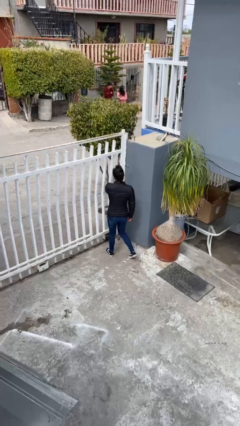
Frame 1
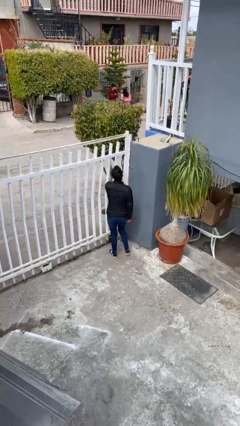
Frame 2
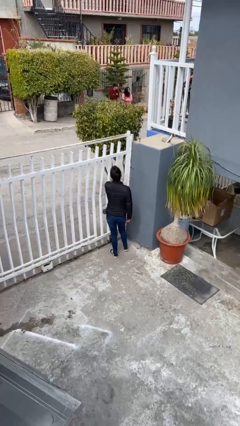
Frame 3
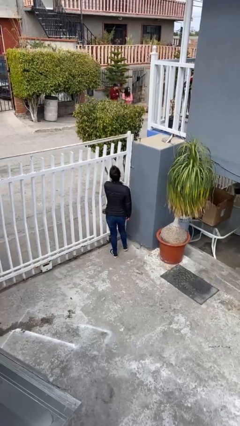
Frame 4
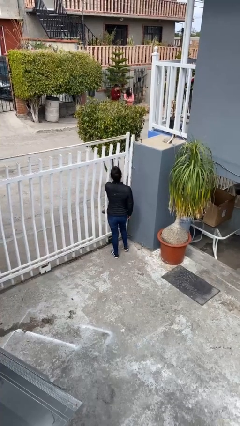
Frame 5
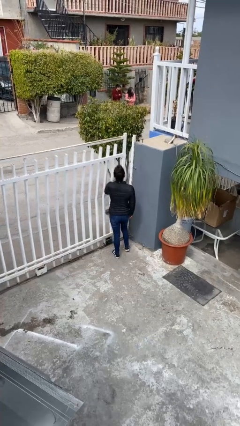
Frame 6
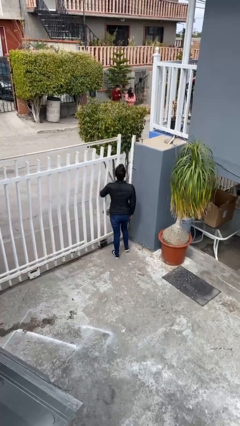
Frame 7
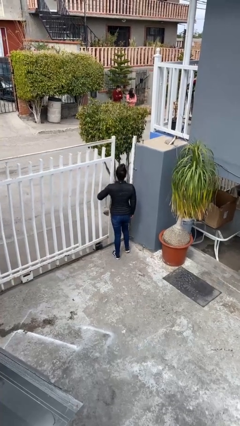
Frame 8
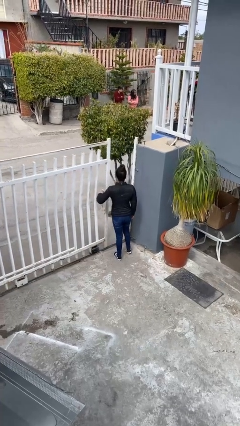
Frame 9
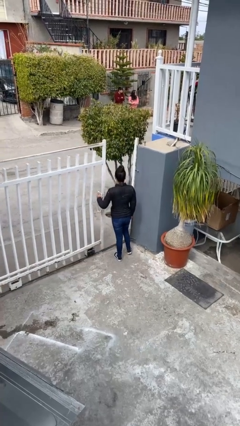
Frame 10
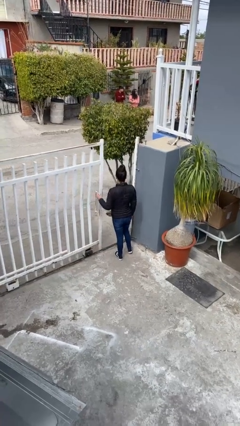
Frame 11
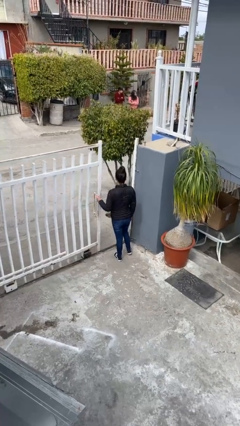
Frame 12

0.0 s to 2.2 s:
person opens facility door

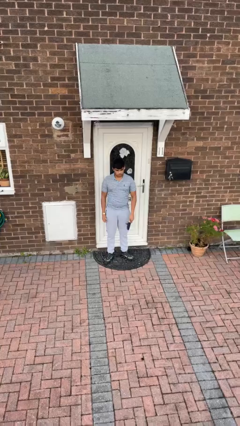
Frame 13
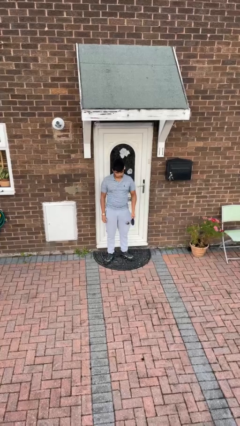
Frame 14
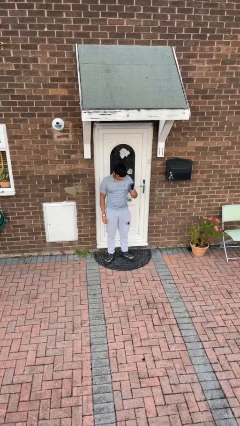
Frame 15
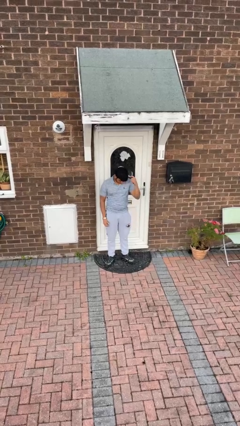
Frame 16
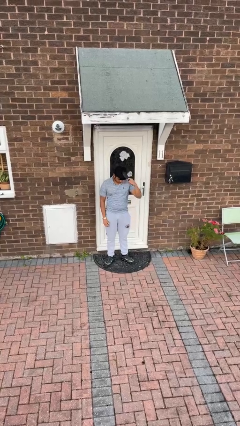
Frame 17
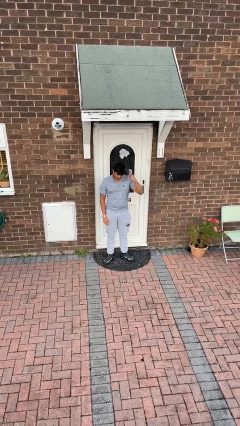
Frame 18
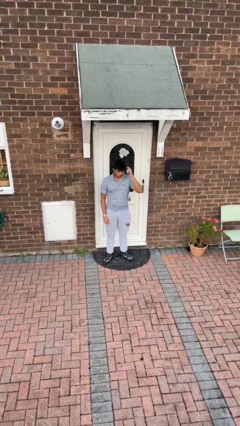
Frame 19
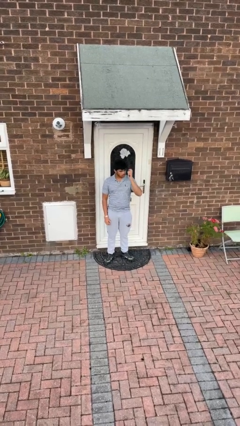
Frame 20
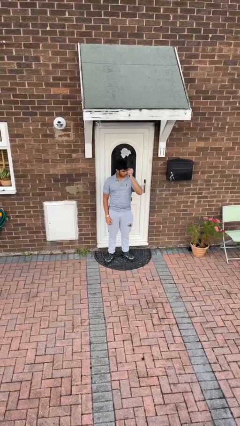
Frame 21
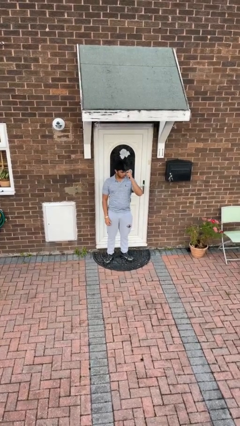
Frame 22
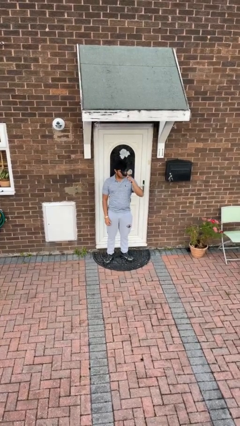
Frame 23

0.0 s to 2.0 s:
person brushes hair

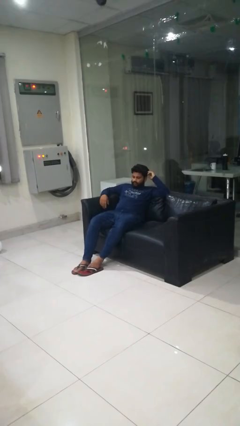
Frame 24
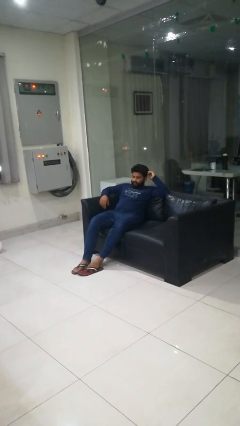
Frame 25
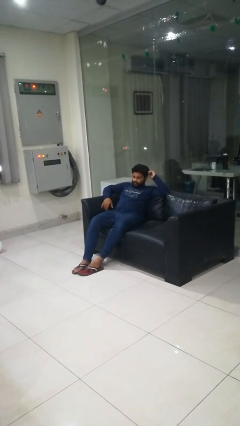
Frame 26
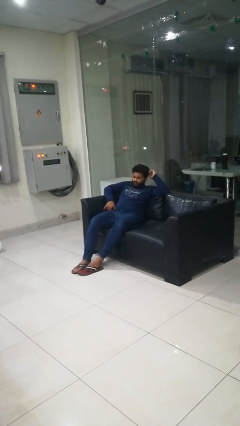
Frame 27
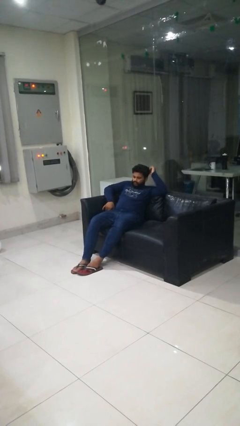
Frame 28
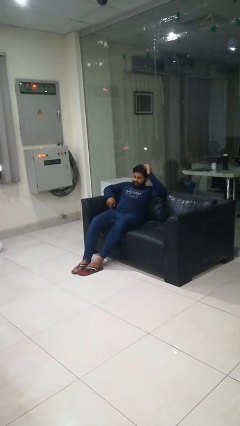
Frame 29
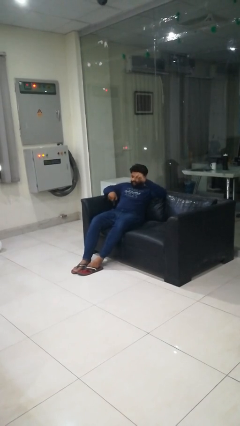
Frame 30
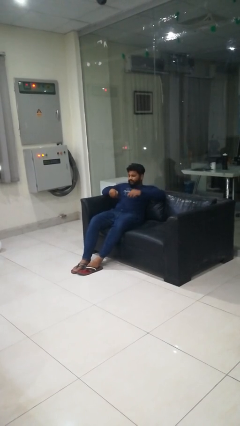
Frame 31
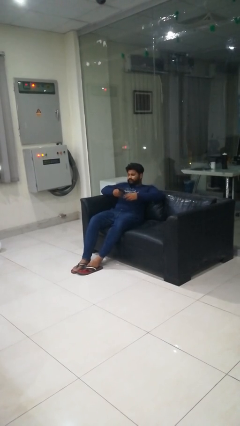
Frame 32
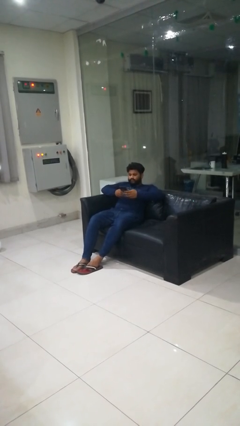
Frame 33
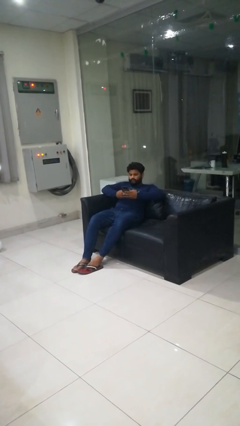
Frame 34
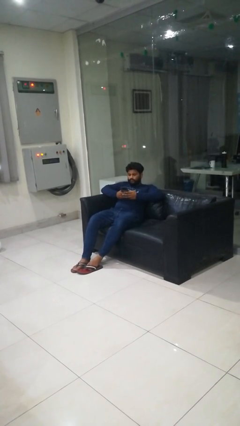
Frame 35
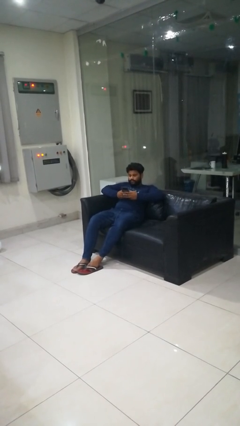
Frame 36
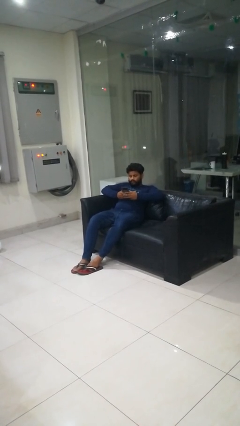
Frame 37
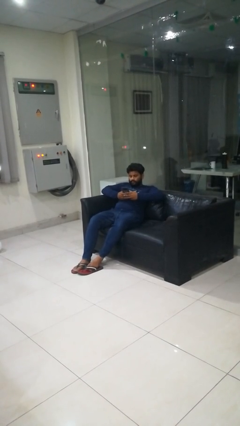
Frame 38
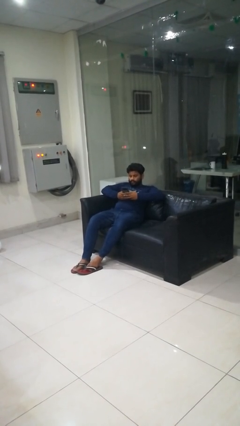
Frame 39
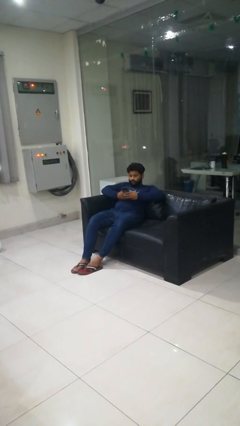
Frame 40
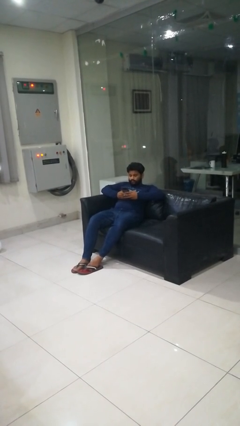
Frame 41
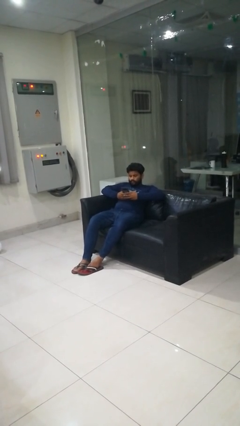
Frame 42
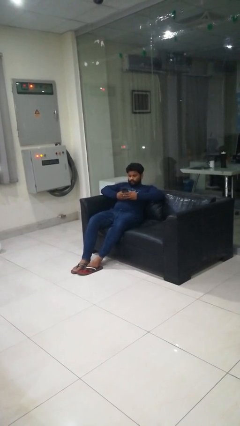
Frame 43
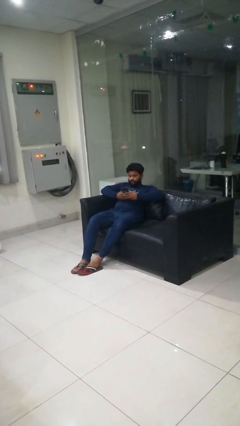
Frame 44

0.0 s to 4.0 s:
person takes phone from pocket

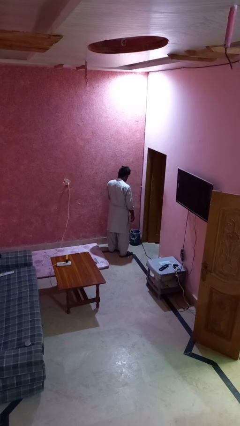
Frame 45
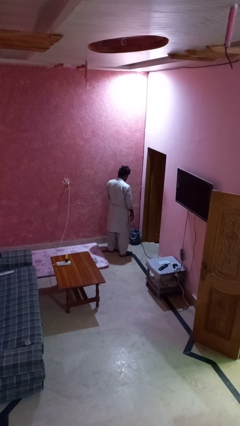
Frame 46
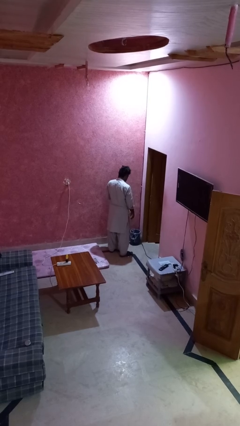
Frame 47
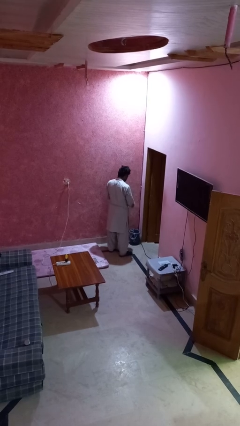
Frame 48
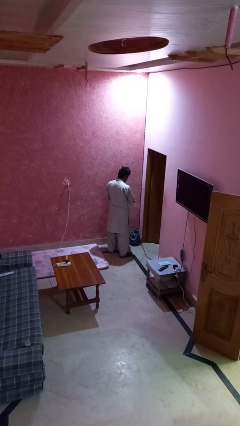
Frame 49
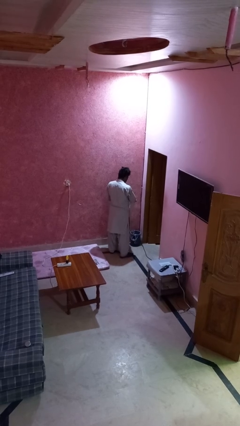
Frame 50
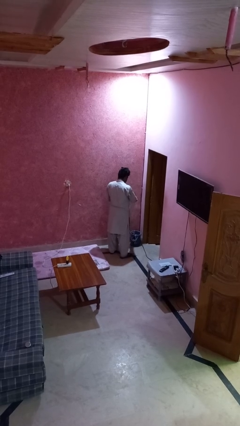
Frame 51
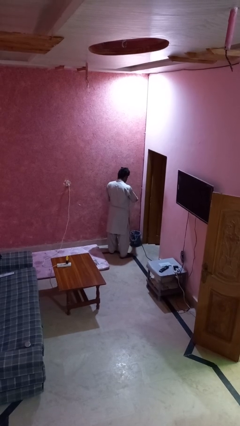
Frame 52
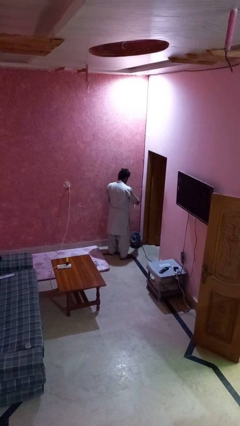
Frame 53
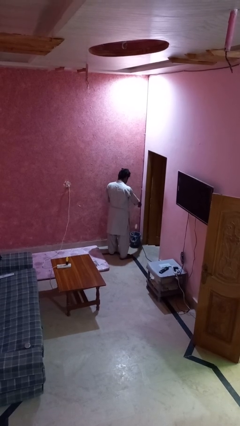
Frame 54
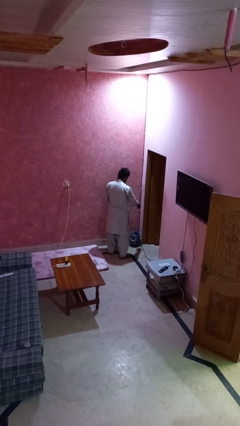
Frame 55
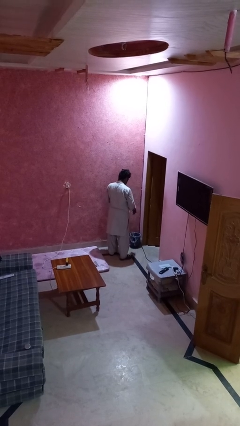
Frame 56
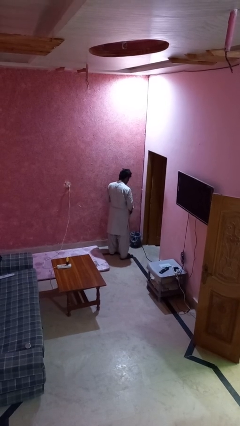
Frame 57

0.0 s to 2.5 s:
person discards trash

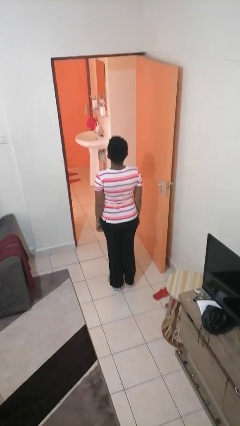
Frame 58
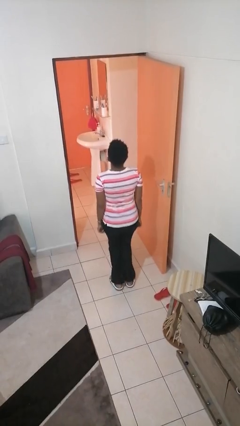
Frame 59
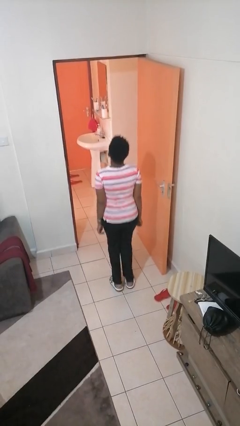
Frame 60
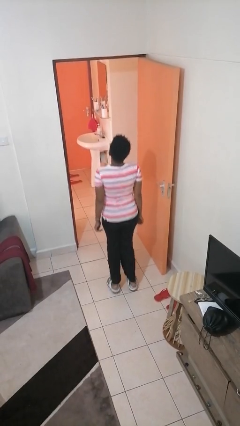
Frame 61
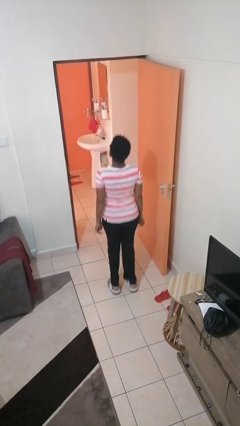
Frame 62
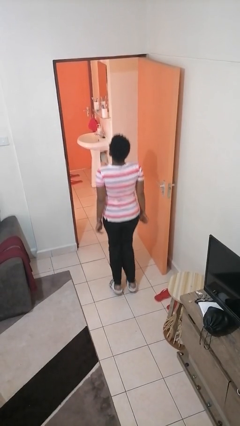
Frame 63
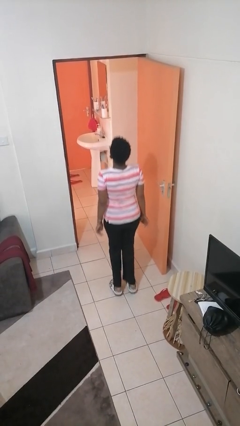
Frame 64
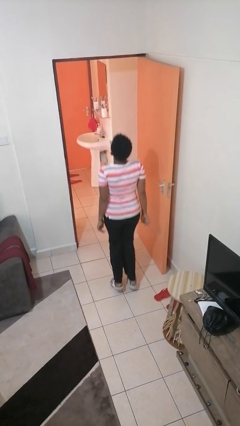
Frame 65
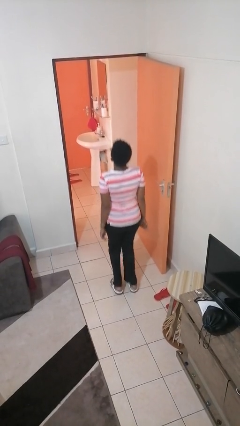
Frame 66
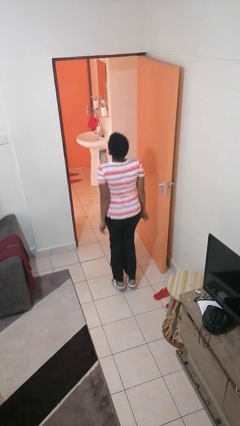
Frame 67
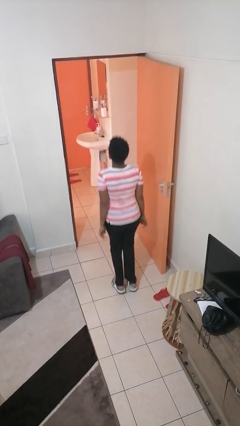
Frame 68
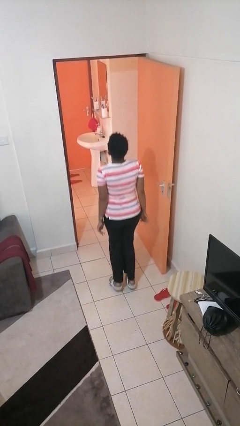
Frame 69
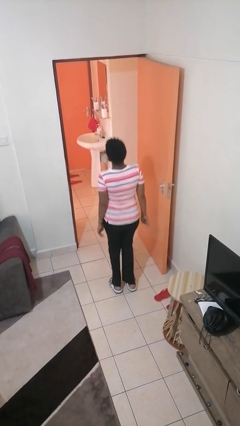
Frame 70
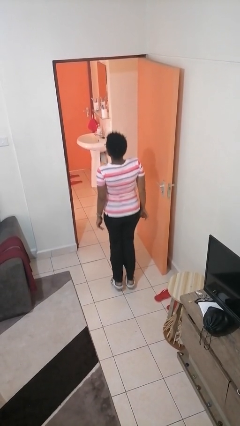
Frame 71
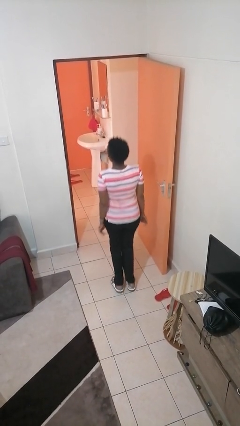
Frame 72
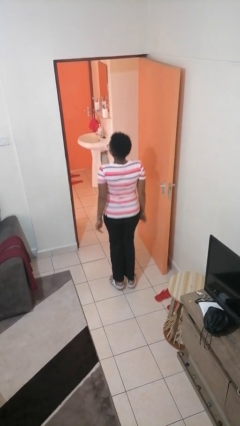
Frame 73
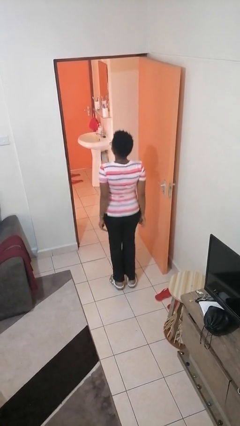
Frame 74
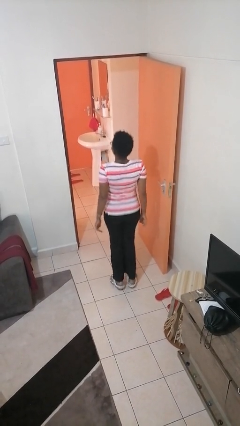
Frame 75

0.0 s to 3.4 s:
person jumps

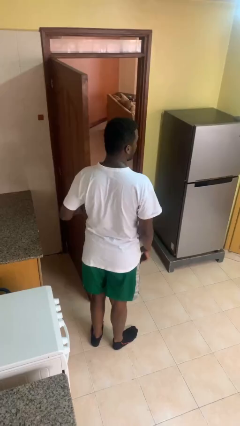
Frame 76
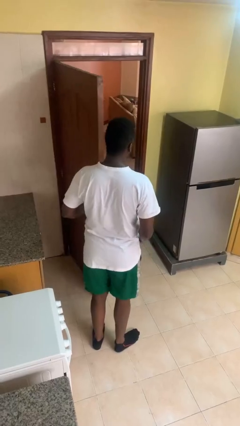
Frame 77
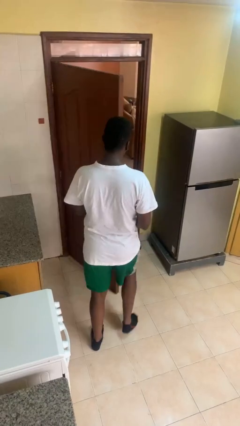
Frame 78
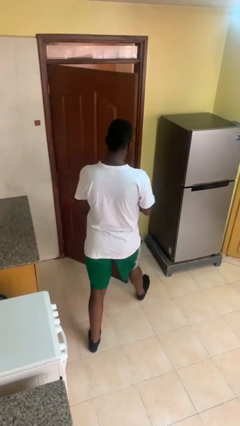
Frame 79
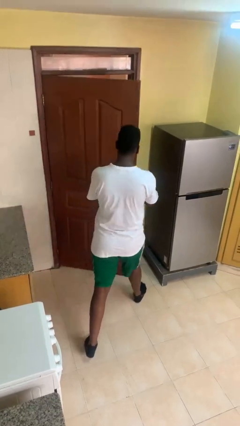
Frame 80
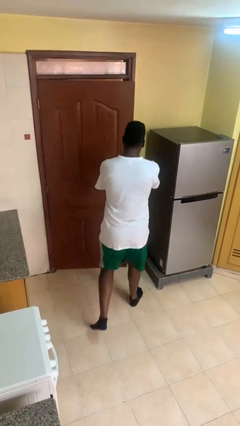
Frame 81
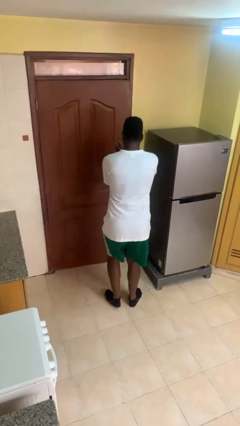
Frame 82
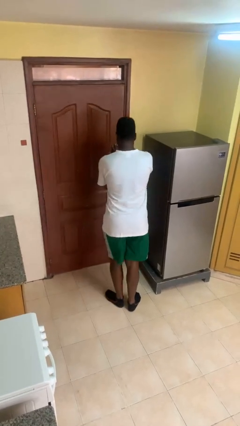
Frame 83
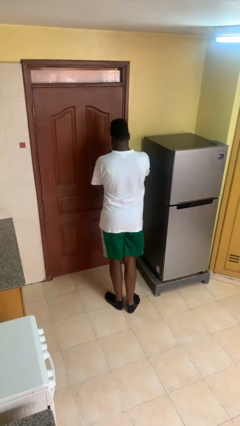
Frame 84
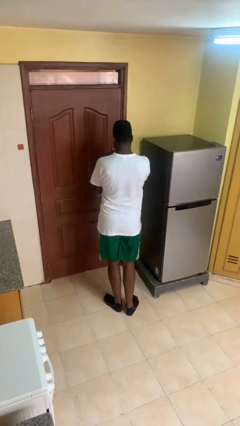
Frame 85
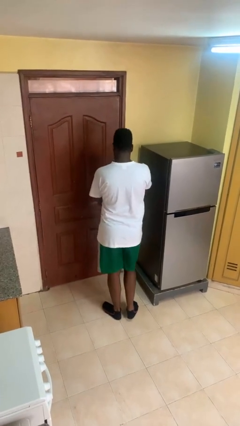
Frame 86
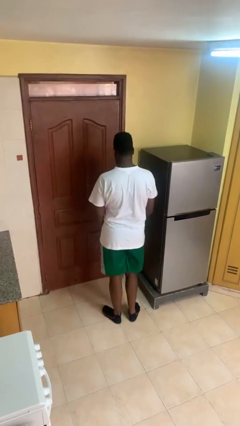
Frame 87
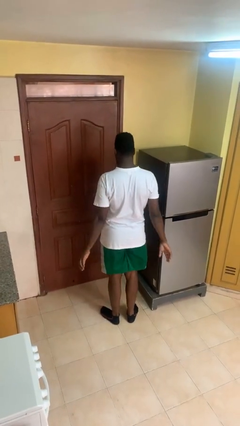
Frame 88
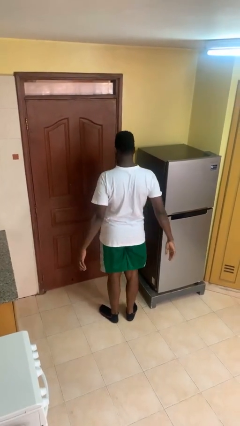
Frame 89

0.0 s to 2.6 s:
person closes facility door

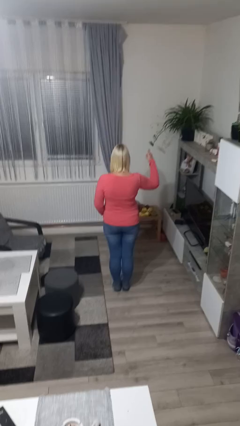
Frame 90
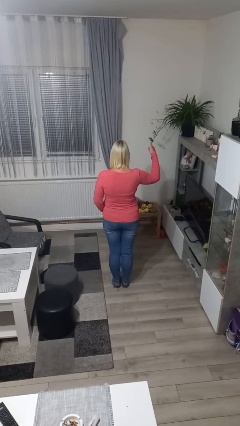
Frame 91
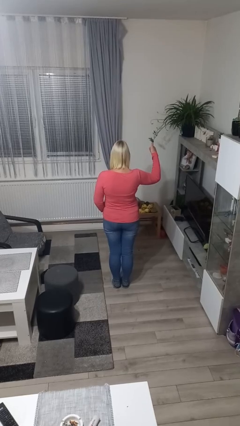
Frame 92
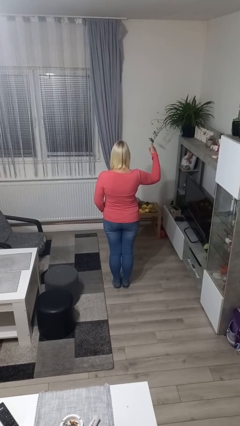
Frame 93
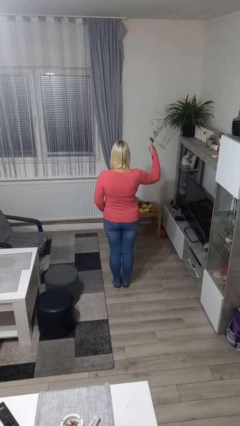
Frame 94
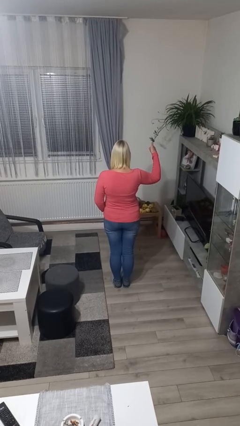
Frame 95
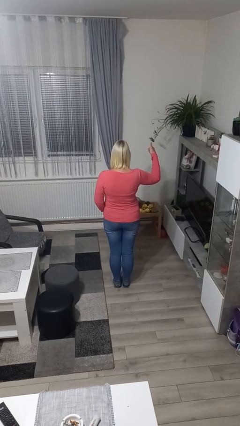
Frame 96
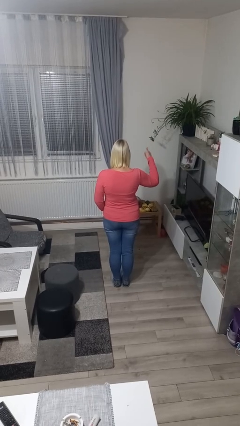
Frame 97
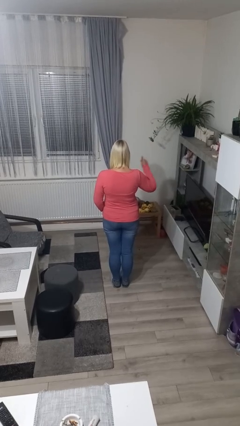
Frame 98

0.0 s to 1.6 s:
person gestures number one
